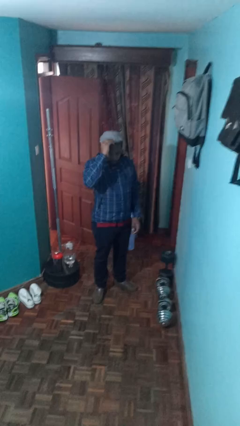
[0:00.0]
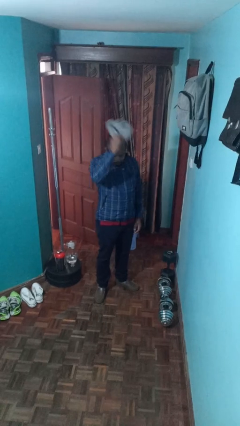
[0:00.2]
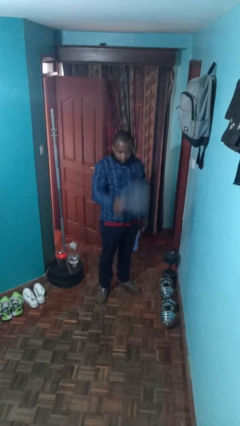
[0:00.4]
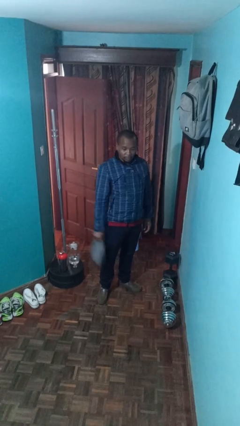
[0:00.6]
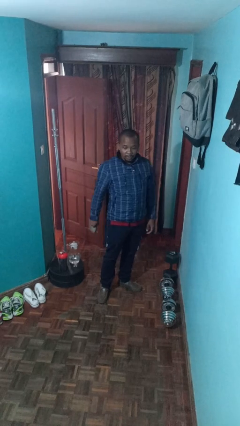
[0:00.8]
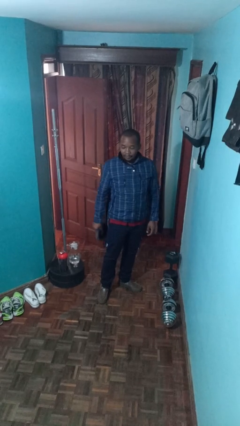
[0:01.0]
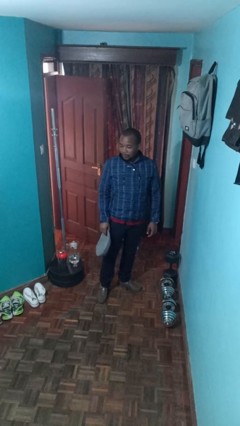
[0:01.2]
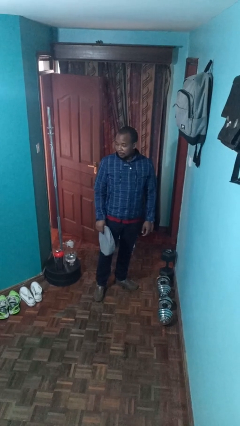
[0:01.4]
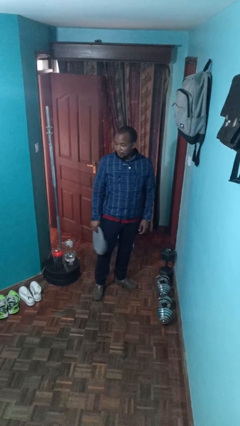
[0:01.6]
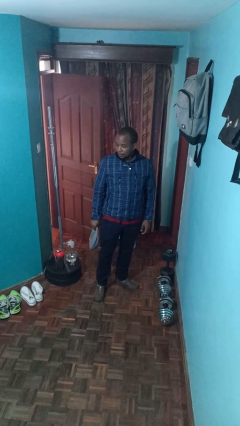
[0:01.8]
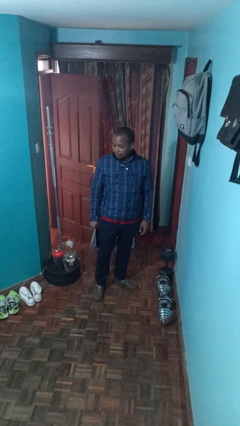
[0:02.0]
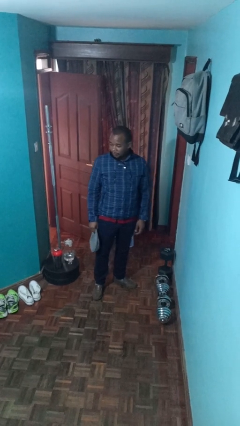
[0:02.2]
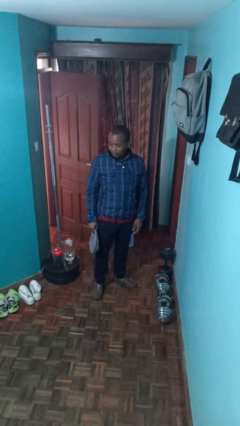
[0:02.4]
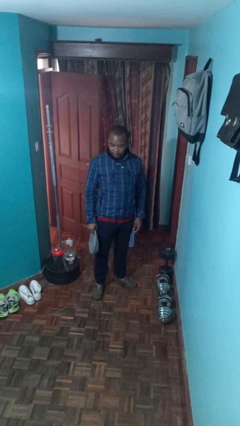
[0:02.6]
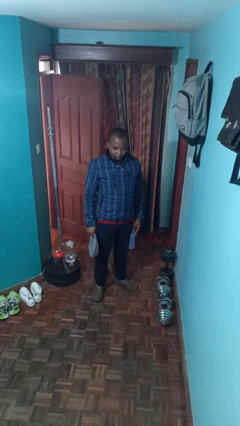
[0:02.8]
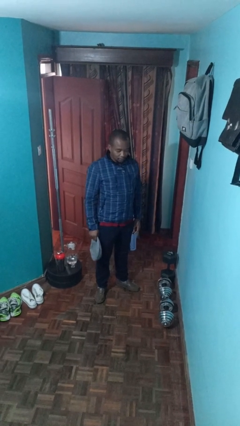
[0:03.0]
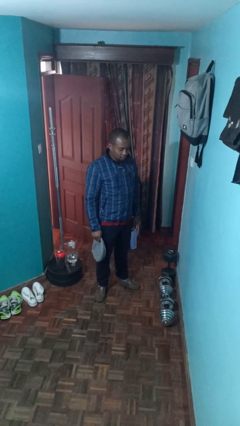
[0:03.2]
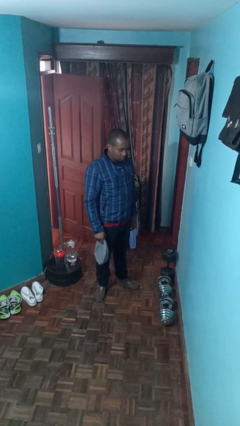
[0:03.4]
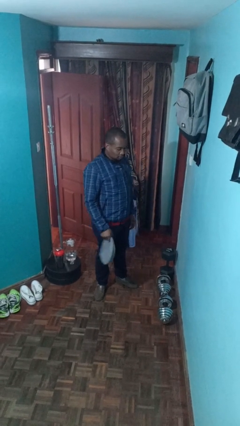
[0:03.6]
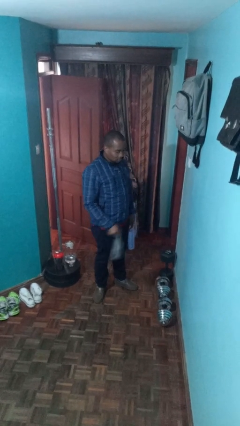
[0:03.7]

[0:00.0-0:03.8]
person takes off hat

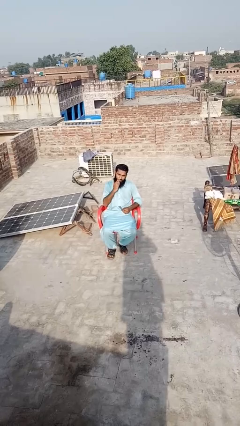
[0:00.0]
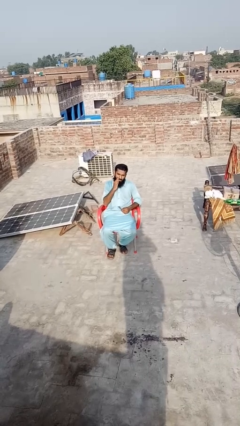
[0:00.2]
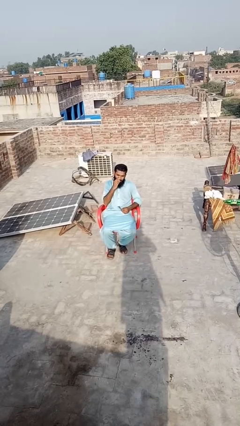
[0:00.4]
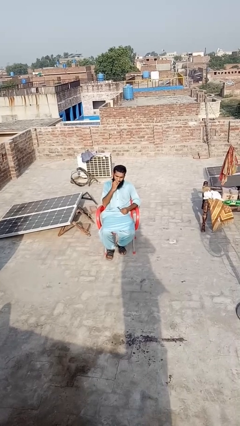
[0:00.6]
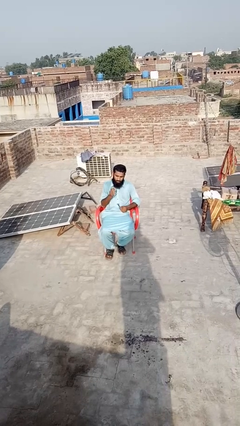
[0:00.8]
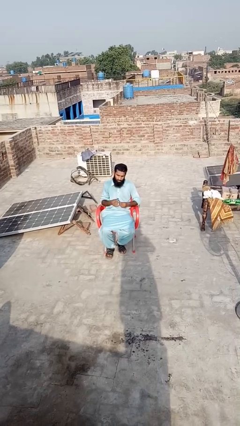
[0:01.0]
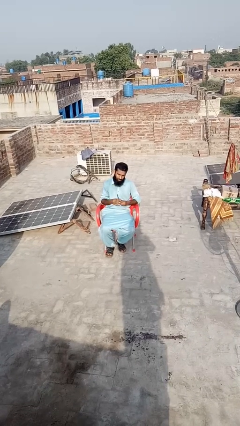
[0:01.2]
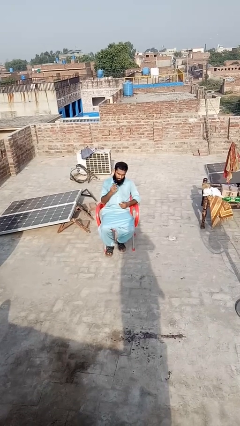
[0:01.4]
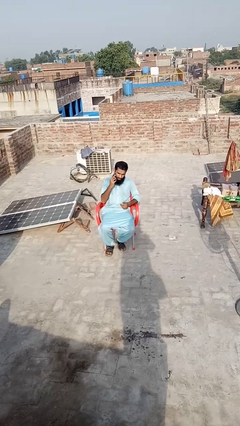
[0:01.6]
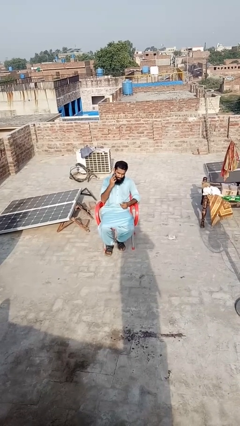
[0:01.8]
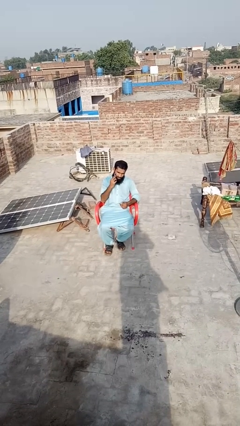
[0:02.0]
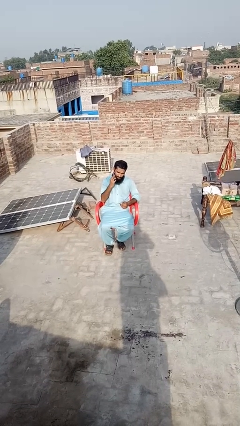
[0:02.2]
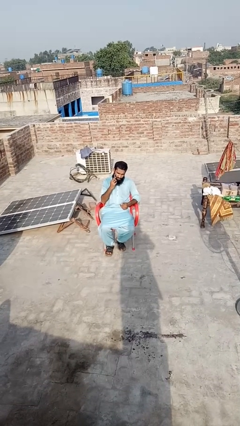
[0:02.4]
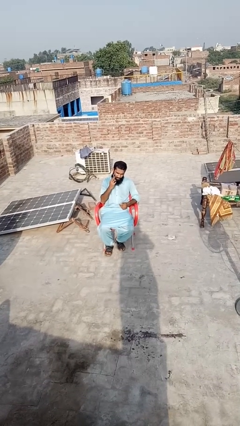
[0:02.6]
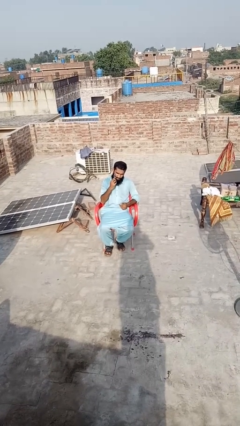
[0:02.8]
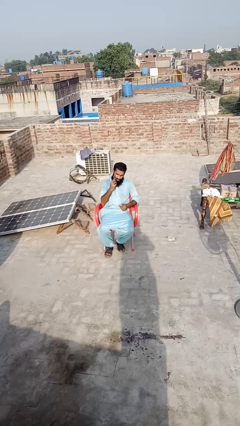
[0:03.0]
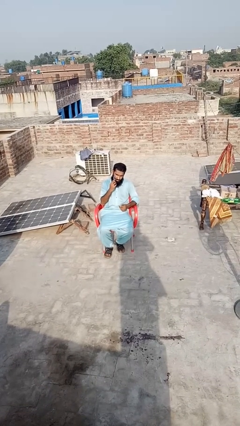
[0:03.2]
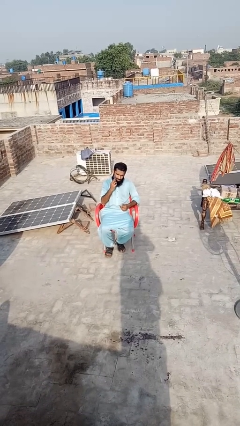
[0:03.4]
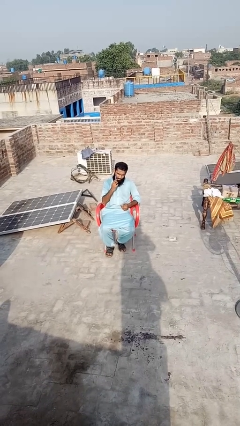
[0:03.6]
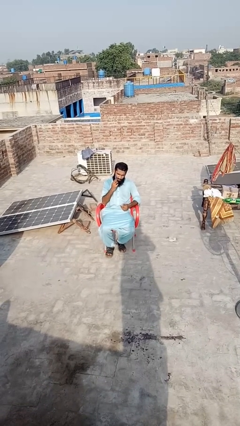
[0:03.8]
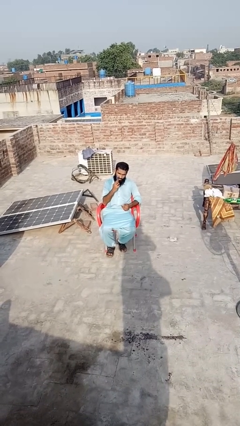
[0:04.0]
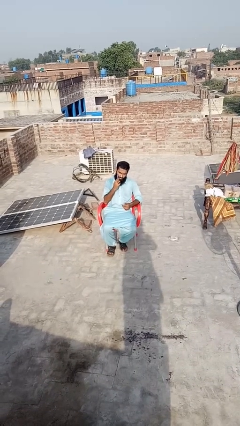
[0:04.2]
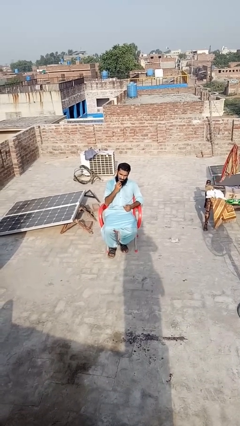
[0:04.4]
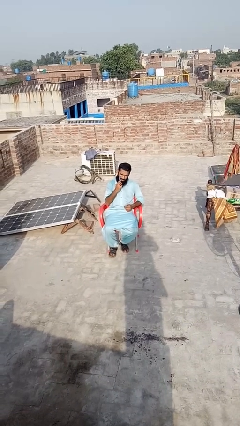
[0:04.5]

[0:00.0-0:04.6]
person shaves face

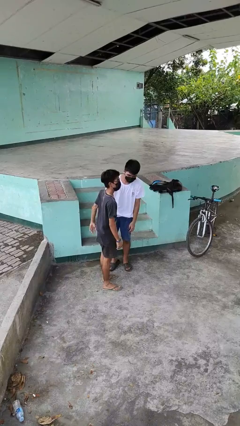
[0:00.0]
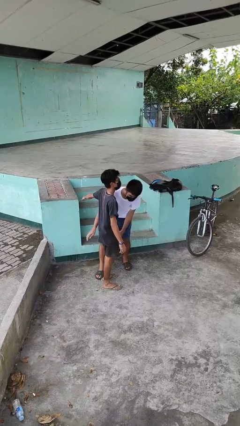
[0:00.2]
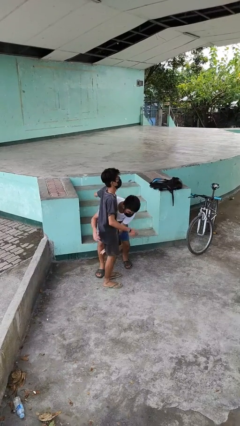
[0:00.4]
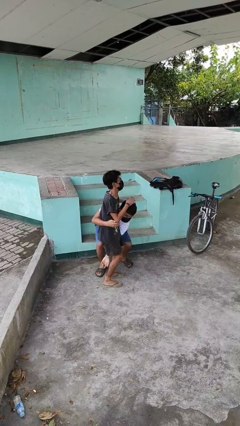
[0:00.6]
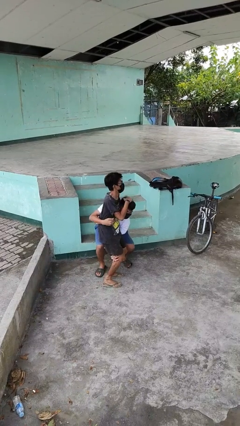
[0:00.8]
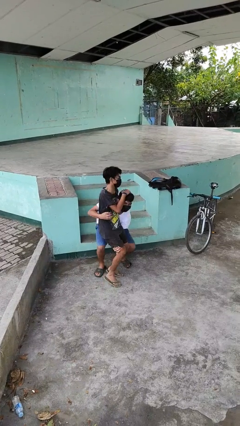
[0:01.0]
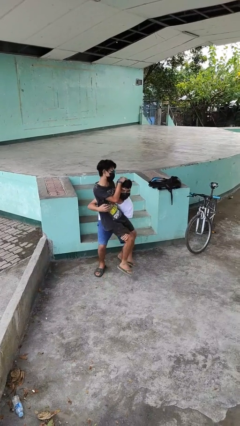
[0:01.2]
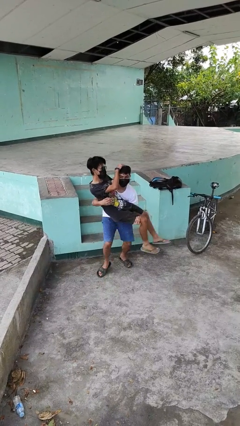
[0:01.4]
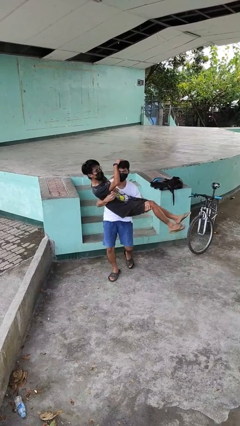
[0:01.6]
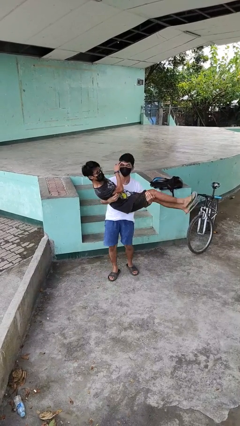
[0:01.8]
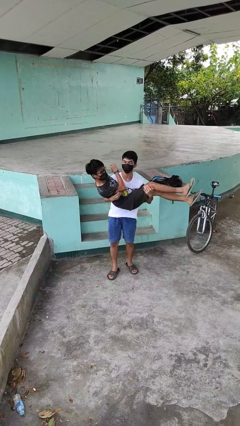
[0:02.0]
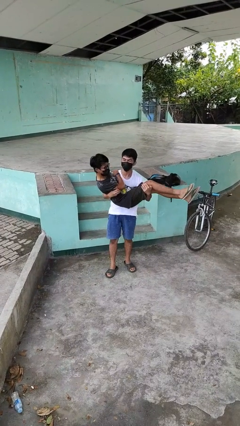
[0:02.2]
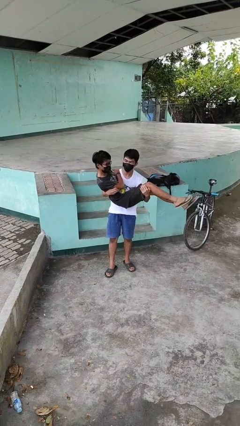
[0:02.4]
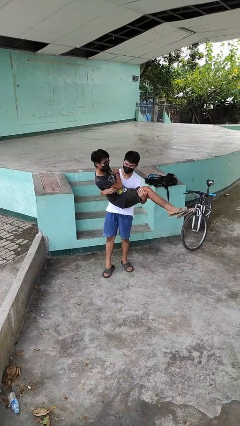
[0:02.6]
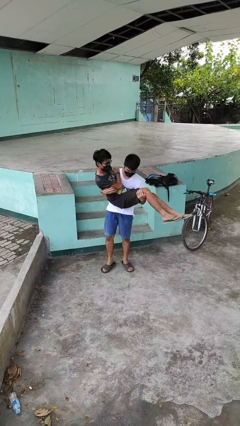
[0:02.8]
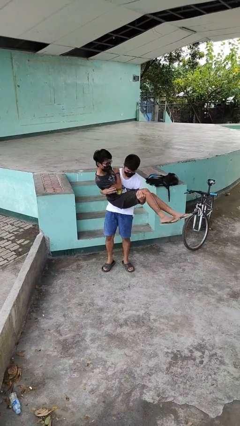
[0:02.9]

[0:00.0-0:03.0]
person picks up person

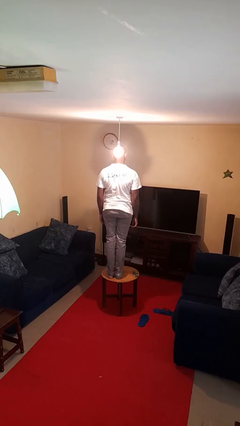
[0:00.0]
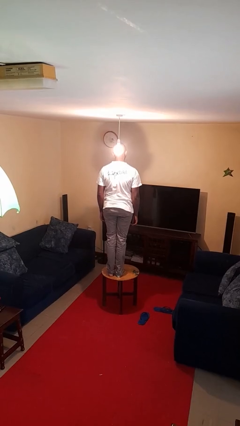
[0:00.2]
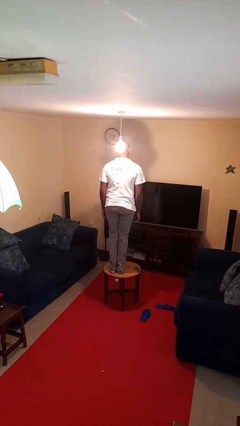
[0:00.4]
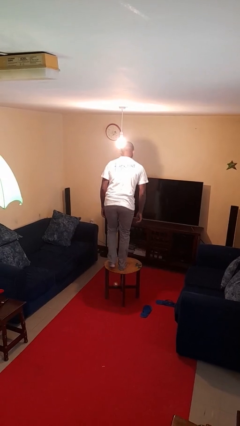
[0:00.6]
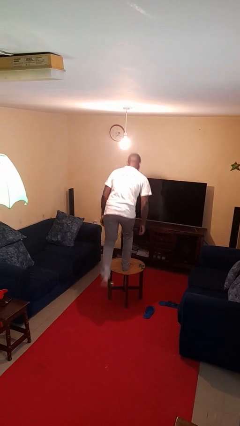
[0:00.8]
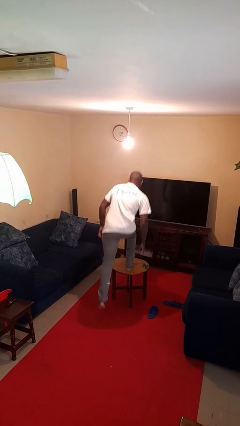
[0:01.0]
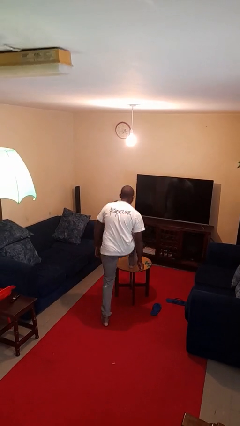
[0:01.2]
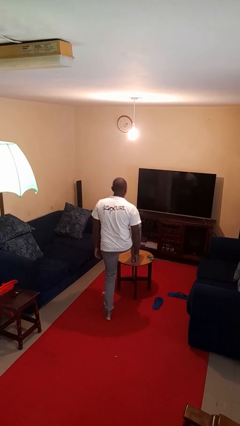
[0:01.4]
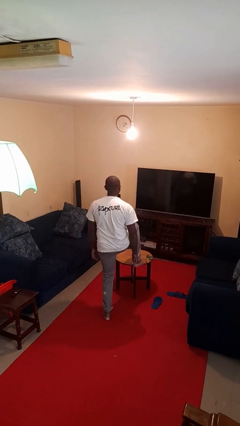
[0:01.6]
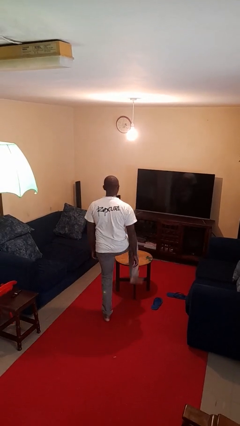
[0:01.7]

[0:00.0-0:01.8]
person climbs off table

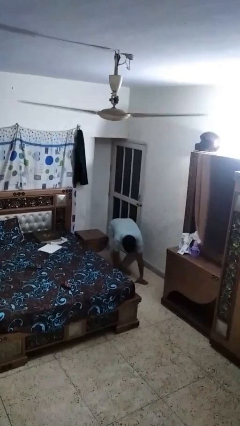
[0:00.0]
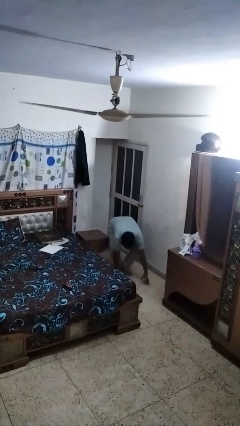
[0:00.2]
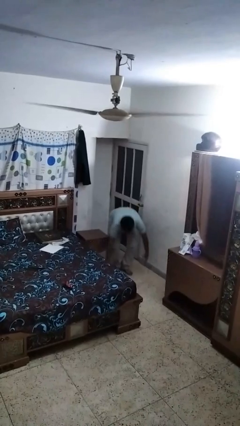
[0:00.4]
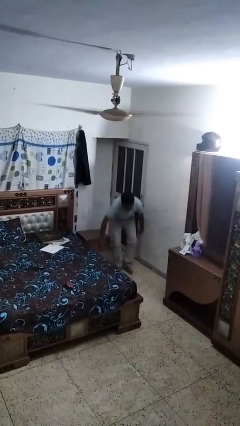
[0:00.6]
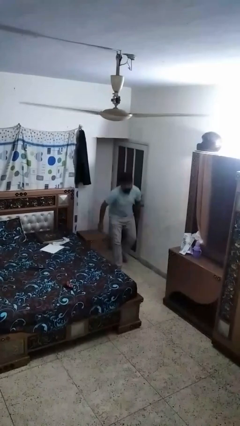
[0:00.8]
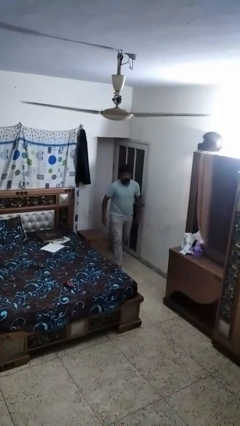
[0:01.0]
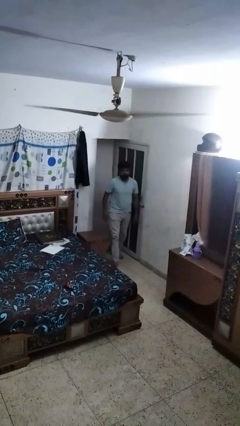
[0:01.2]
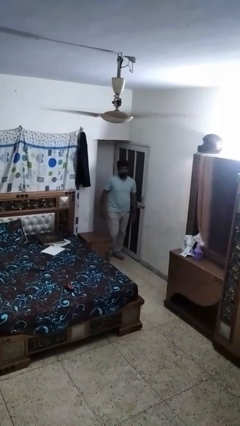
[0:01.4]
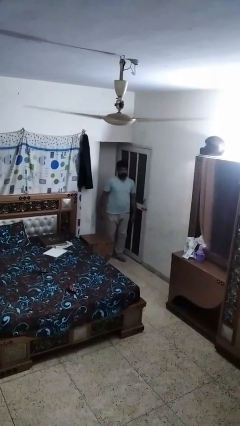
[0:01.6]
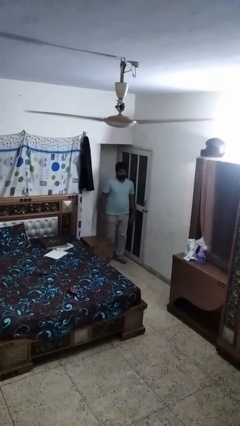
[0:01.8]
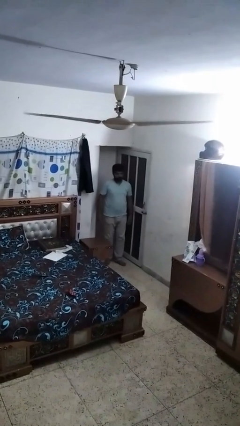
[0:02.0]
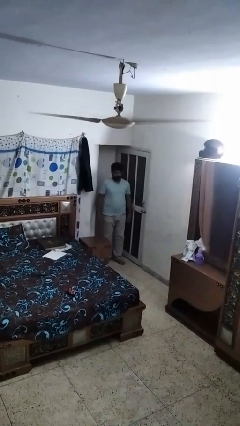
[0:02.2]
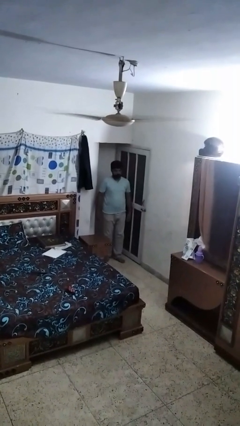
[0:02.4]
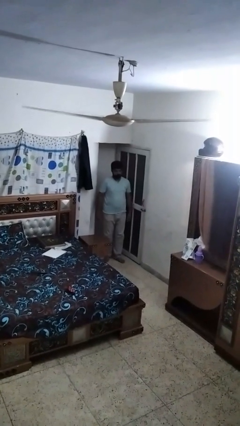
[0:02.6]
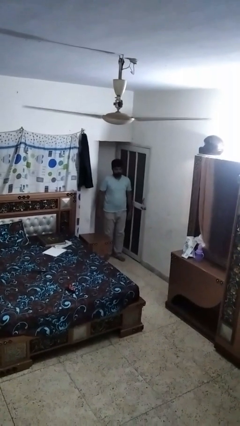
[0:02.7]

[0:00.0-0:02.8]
person stands up from floor

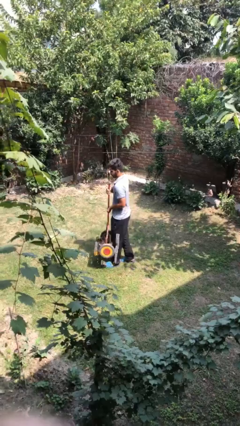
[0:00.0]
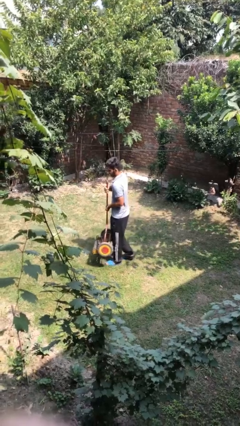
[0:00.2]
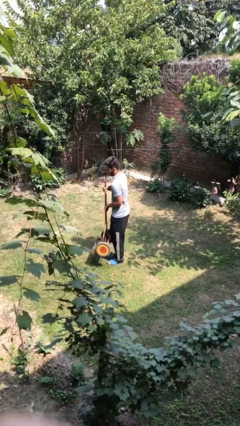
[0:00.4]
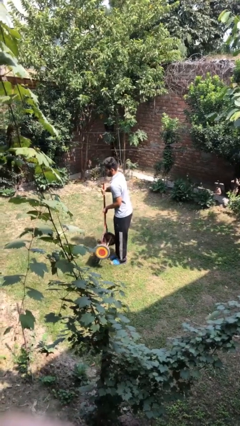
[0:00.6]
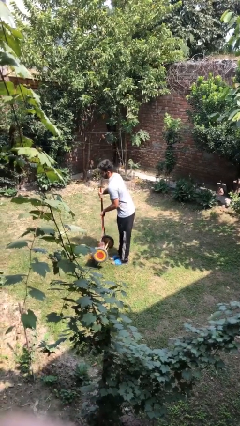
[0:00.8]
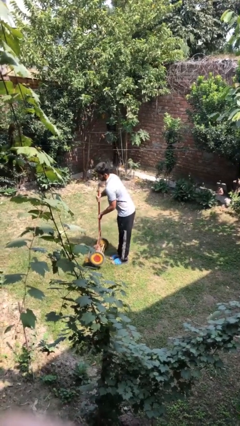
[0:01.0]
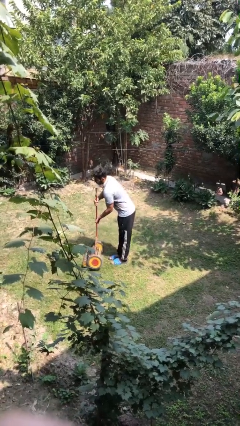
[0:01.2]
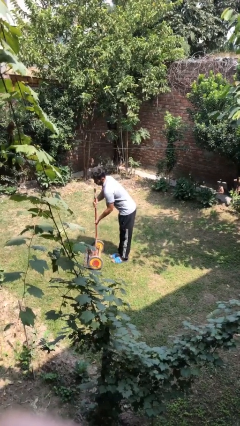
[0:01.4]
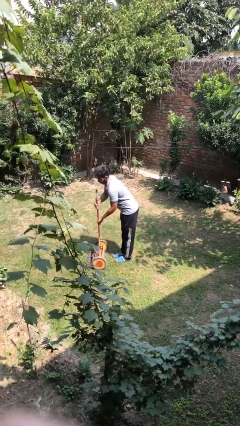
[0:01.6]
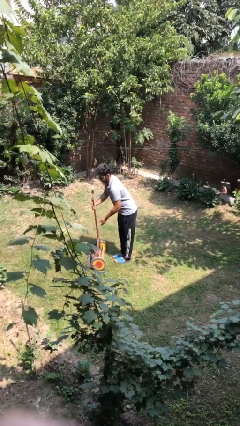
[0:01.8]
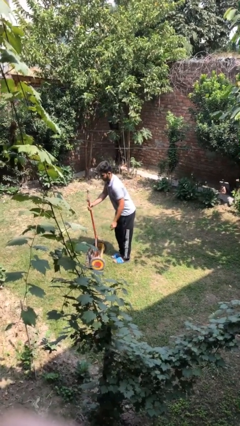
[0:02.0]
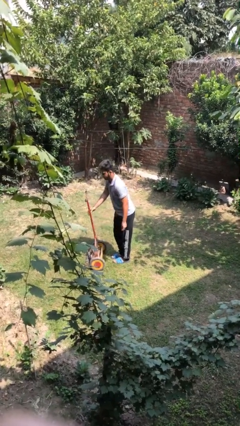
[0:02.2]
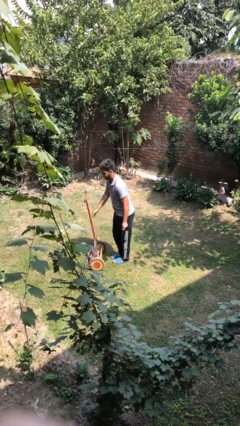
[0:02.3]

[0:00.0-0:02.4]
person puts down object on floor
